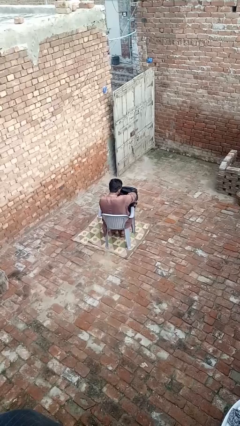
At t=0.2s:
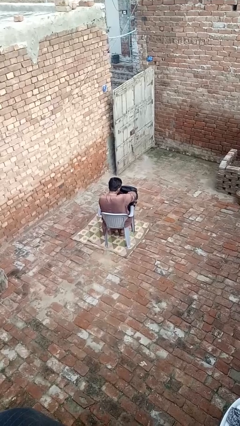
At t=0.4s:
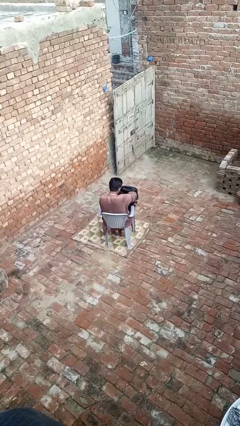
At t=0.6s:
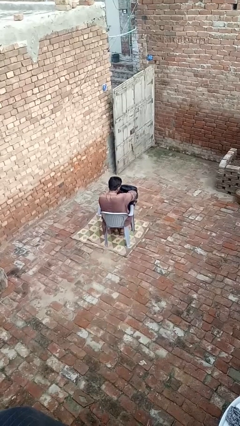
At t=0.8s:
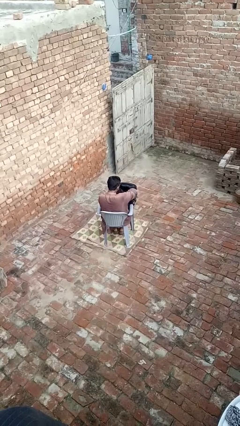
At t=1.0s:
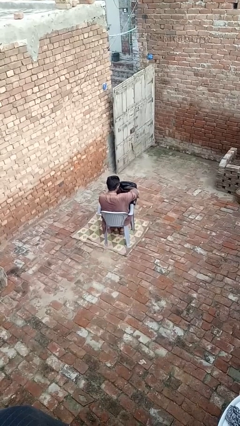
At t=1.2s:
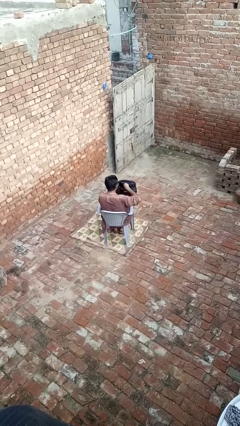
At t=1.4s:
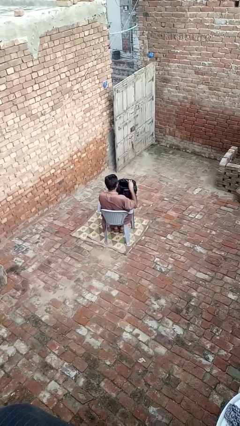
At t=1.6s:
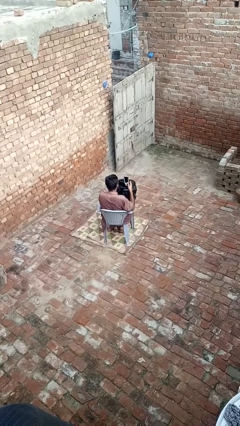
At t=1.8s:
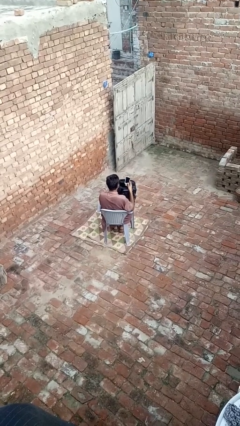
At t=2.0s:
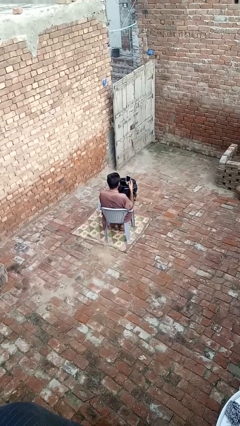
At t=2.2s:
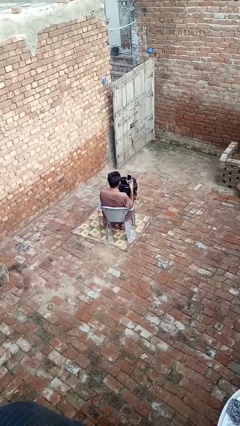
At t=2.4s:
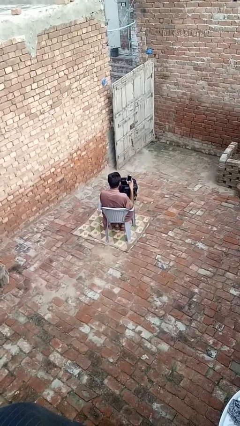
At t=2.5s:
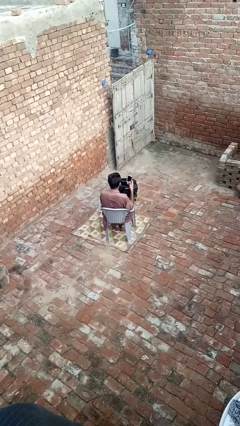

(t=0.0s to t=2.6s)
person takes object from backpack

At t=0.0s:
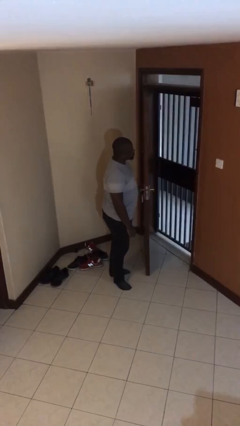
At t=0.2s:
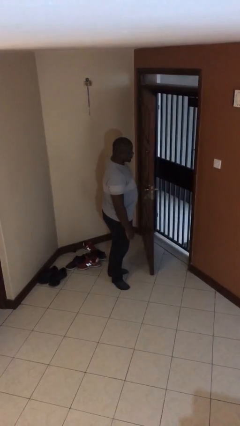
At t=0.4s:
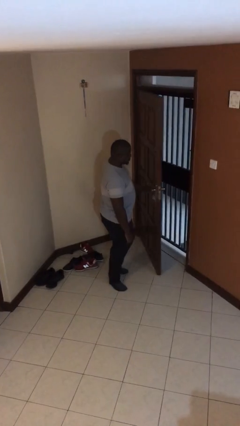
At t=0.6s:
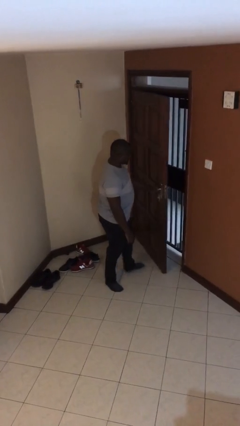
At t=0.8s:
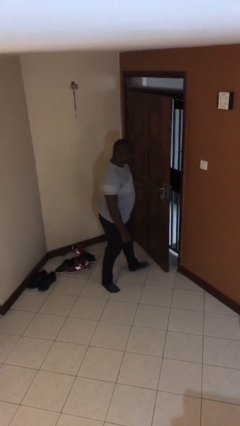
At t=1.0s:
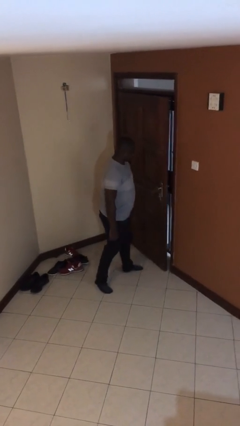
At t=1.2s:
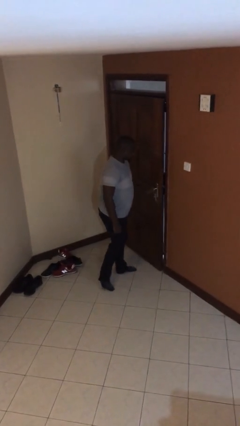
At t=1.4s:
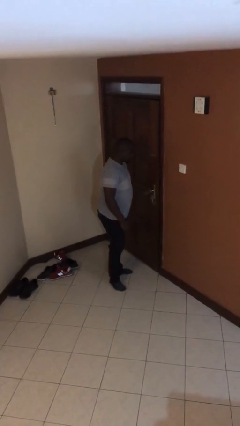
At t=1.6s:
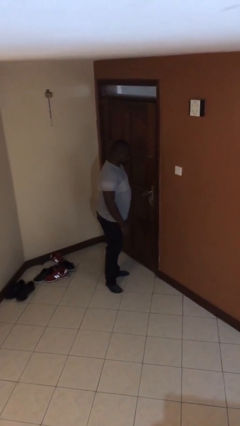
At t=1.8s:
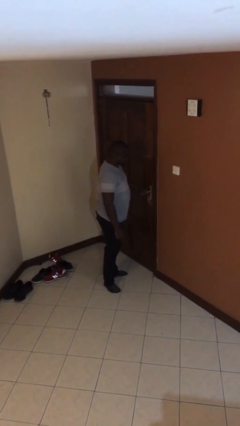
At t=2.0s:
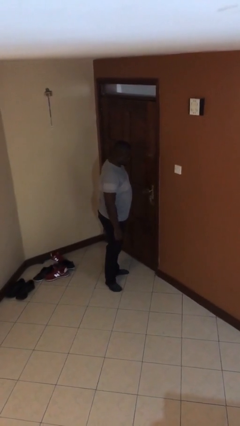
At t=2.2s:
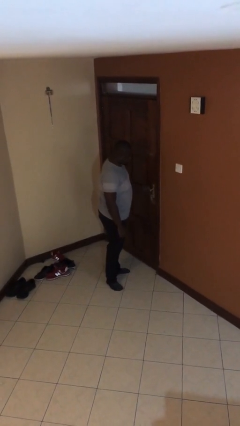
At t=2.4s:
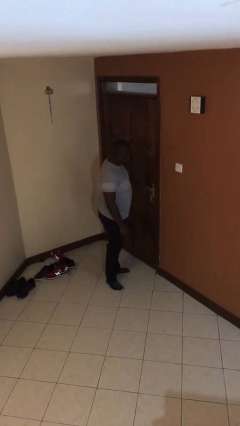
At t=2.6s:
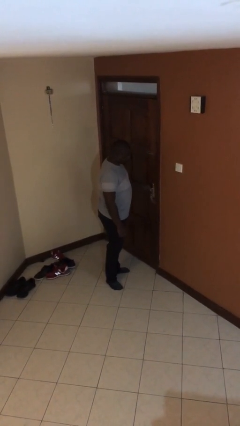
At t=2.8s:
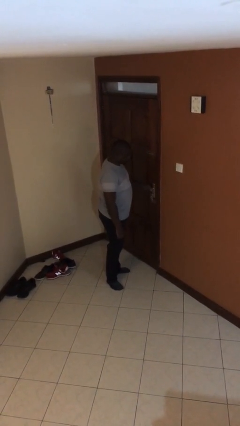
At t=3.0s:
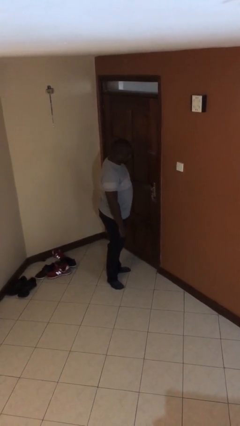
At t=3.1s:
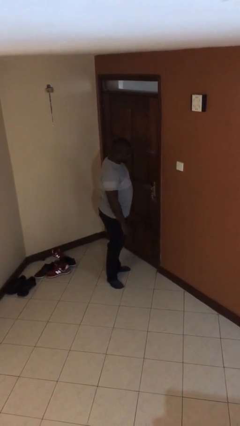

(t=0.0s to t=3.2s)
person closes facility door

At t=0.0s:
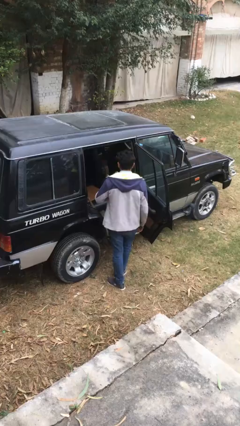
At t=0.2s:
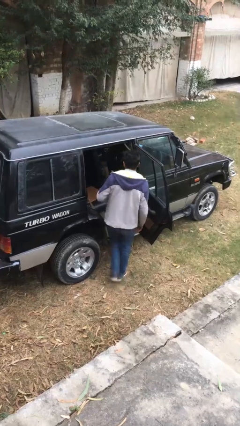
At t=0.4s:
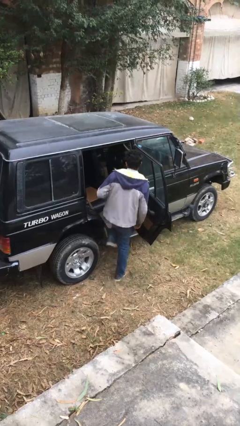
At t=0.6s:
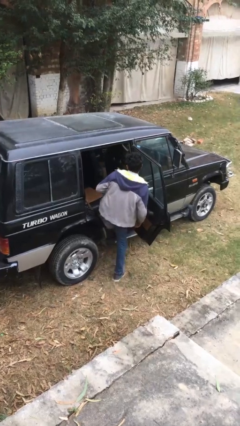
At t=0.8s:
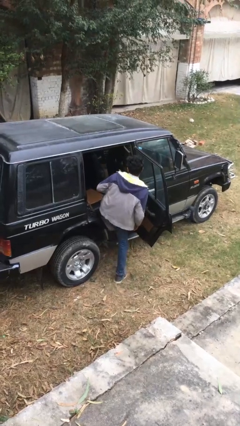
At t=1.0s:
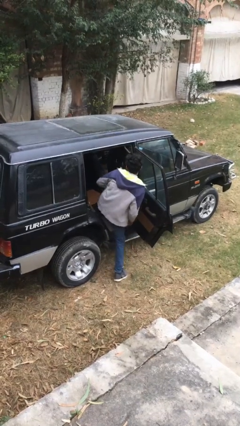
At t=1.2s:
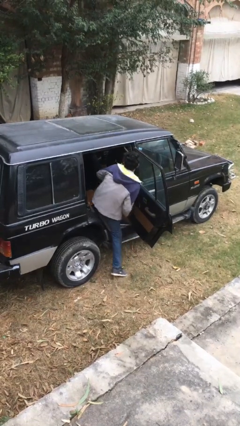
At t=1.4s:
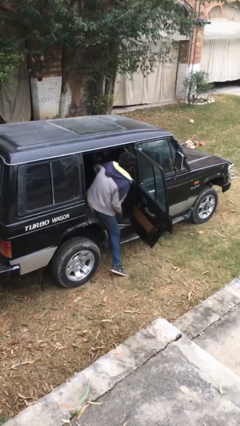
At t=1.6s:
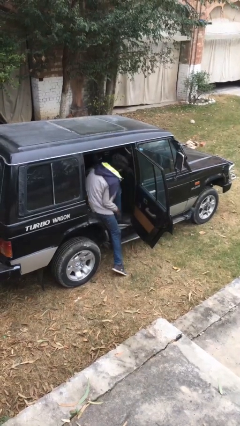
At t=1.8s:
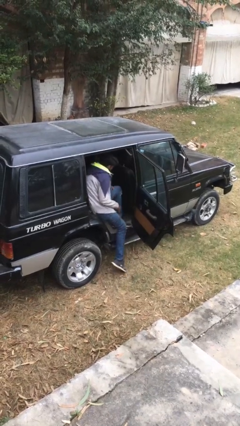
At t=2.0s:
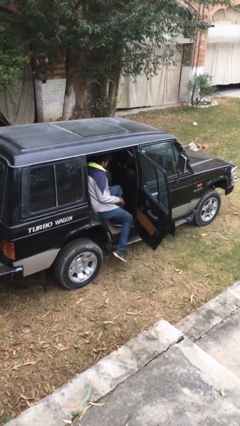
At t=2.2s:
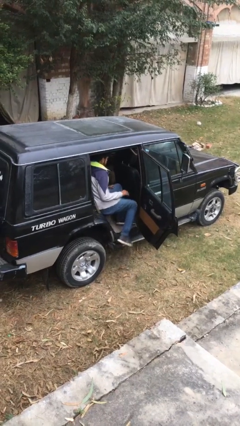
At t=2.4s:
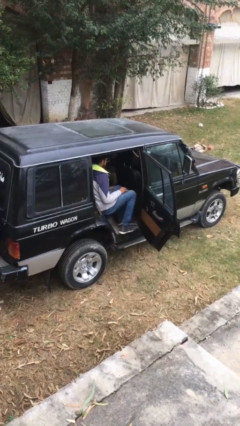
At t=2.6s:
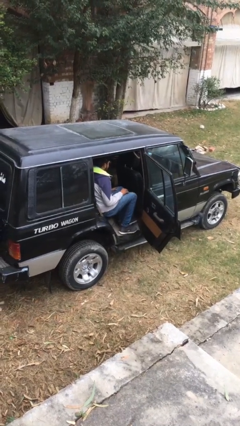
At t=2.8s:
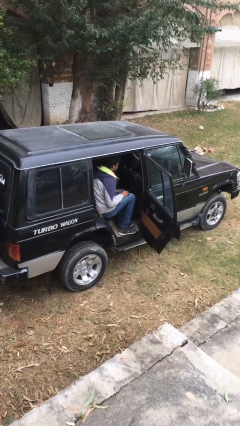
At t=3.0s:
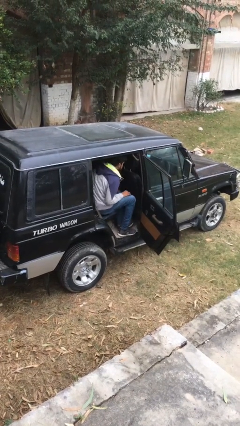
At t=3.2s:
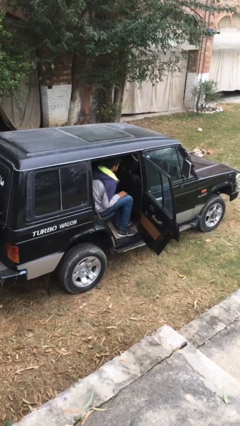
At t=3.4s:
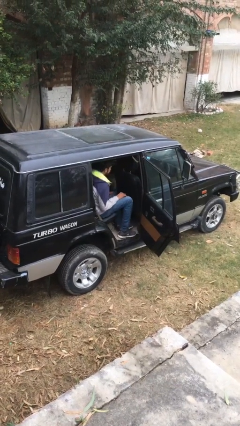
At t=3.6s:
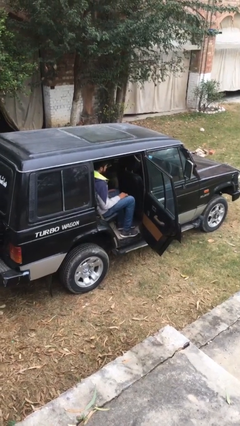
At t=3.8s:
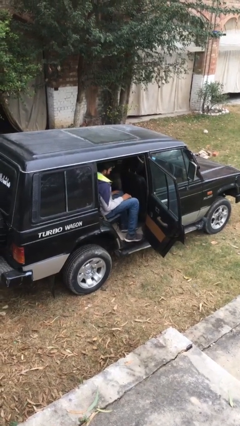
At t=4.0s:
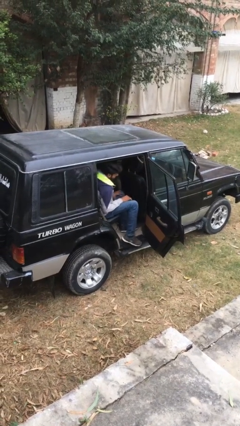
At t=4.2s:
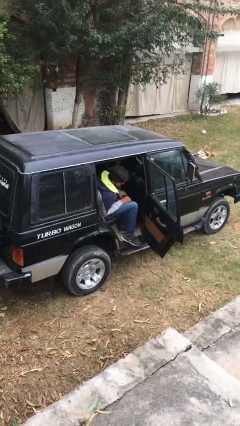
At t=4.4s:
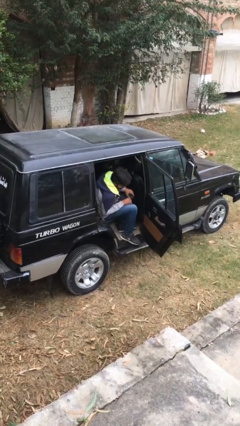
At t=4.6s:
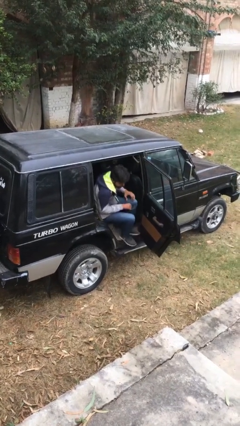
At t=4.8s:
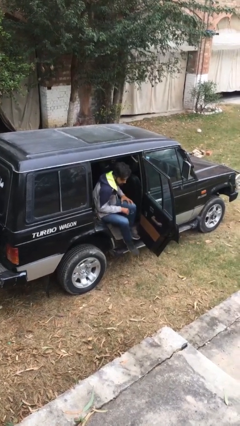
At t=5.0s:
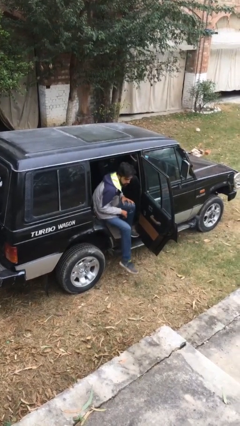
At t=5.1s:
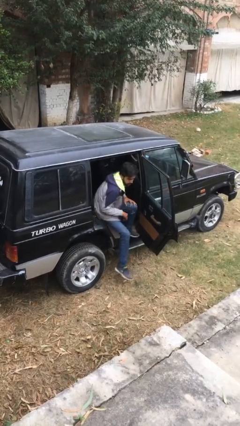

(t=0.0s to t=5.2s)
person enters car

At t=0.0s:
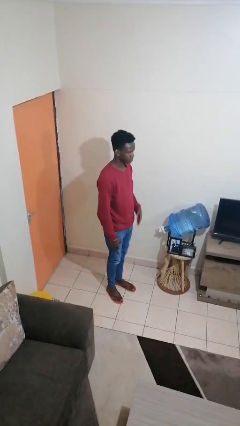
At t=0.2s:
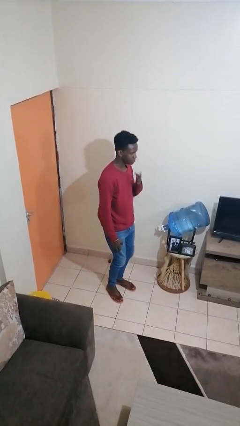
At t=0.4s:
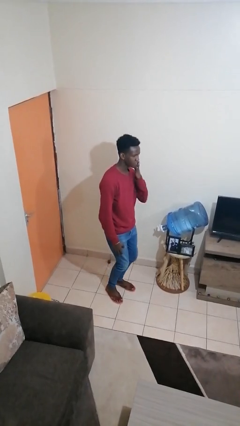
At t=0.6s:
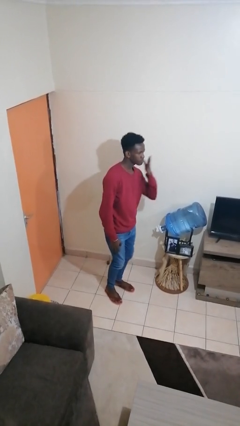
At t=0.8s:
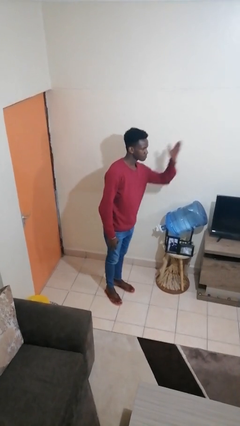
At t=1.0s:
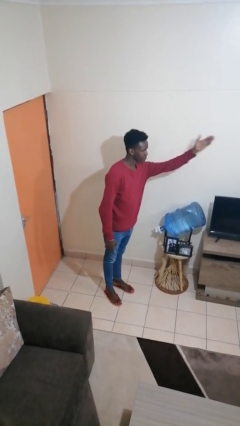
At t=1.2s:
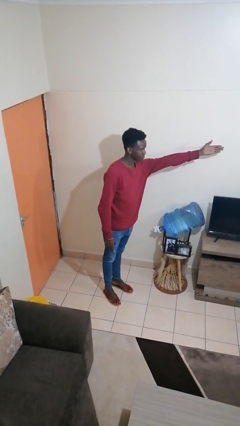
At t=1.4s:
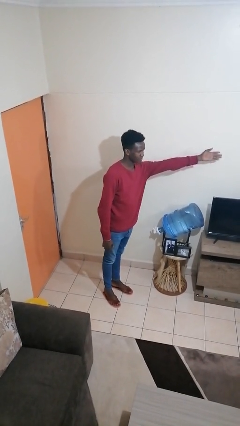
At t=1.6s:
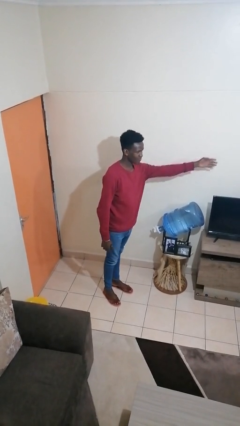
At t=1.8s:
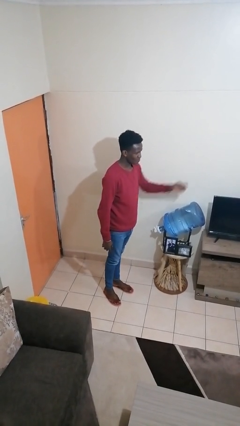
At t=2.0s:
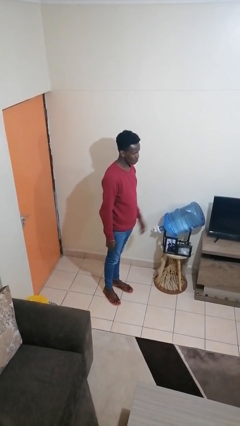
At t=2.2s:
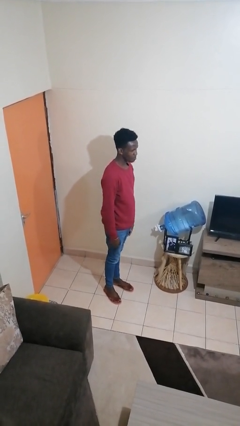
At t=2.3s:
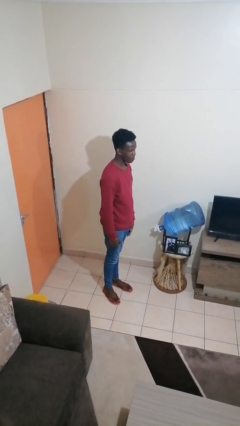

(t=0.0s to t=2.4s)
person gestures blow kiss

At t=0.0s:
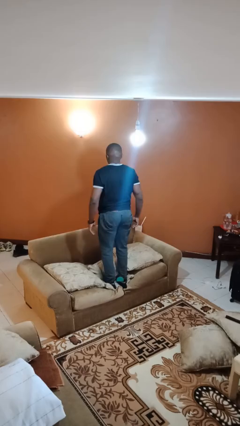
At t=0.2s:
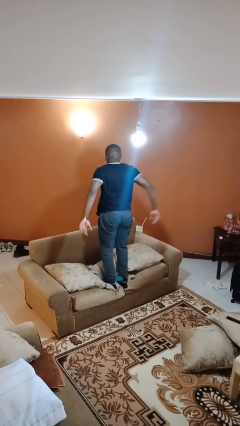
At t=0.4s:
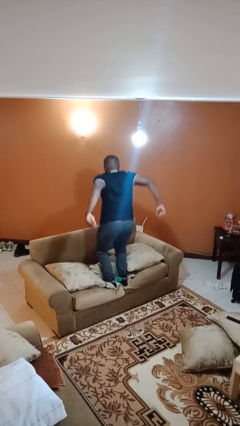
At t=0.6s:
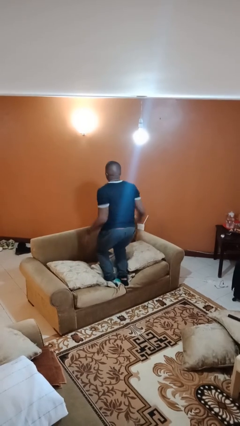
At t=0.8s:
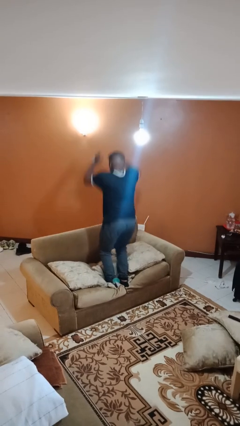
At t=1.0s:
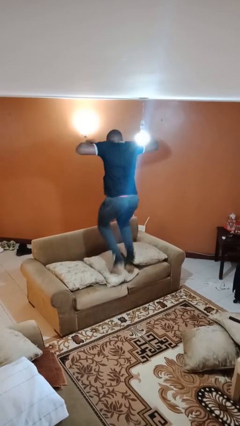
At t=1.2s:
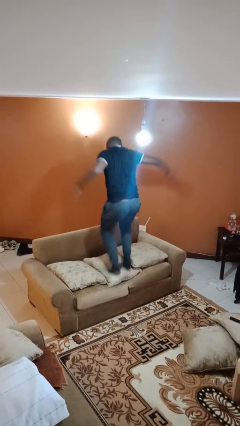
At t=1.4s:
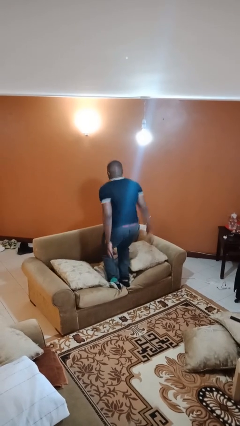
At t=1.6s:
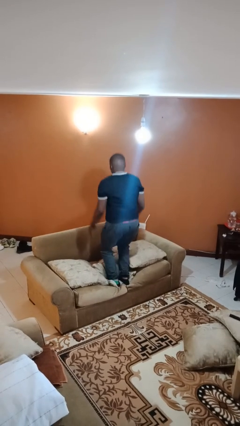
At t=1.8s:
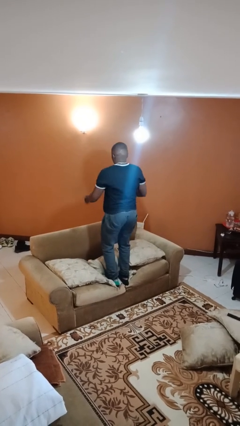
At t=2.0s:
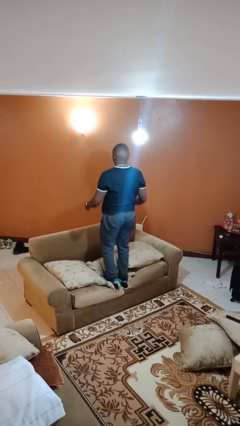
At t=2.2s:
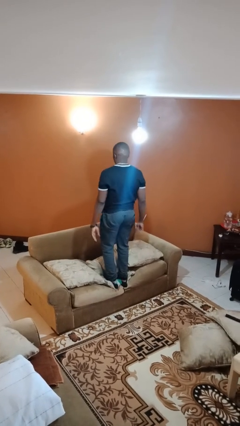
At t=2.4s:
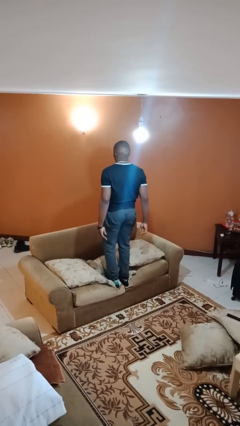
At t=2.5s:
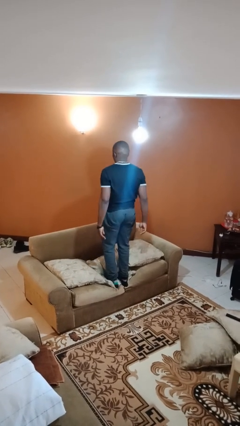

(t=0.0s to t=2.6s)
person jumps on couch

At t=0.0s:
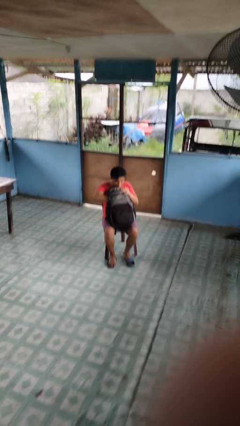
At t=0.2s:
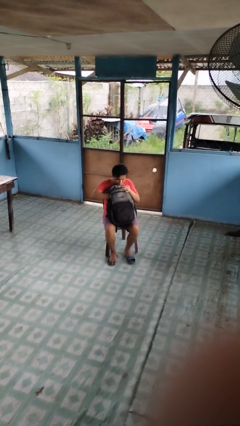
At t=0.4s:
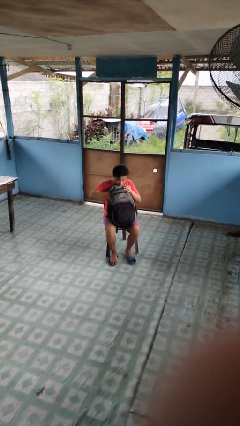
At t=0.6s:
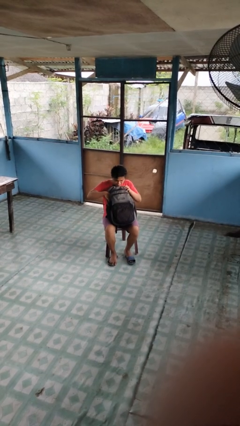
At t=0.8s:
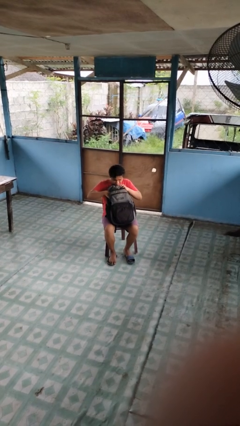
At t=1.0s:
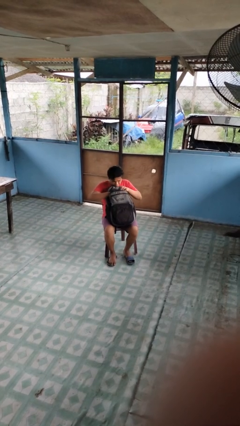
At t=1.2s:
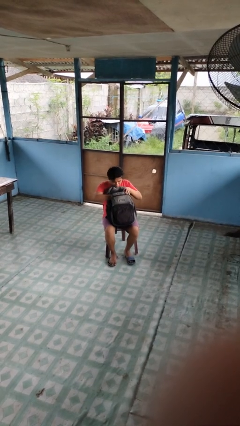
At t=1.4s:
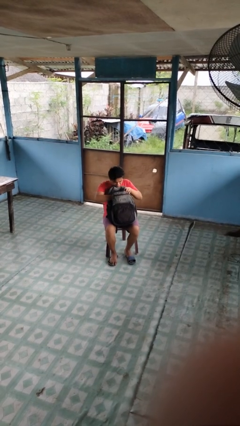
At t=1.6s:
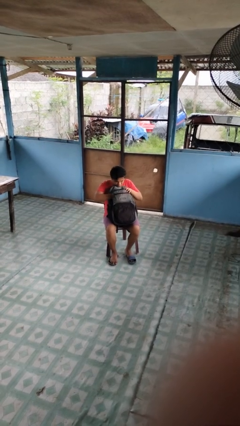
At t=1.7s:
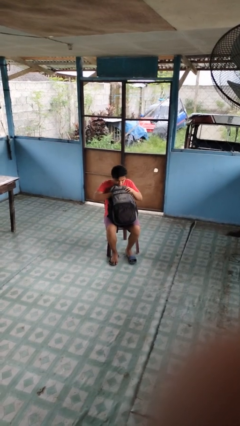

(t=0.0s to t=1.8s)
person searches in backpack
